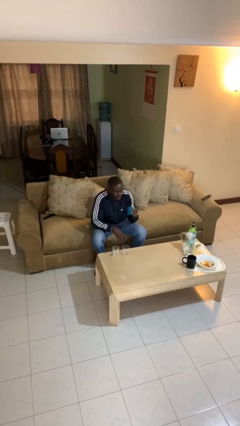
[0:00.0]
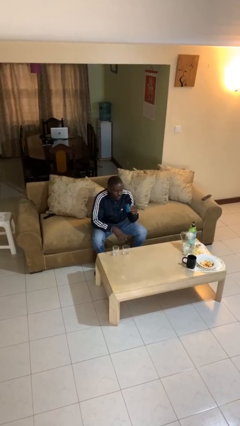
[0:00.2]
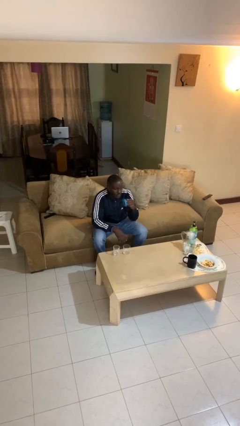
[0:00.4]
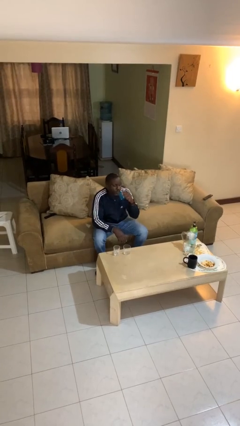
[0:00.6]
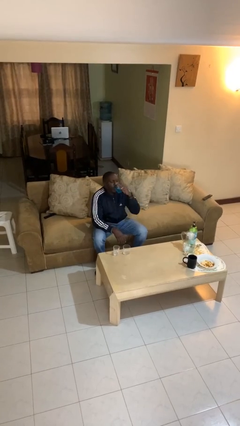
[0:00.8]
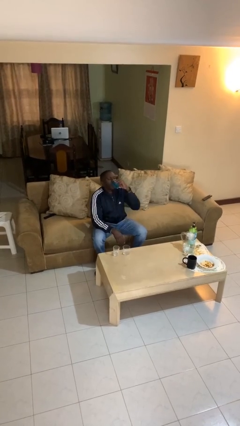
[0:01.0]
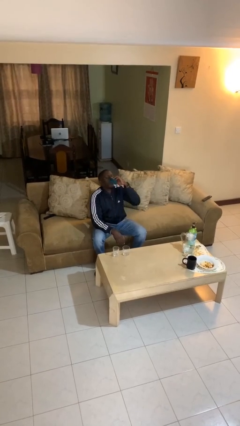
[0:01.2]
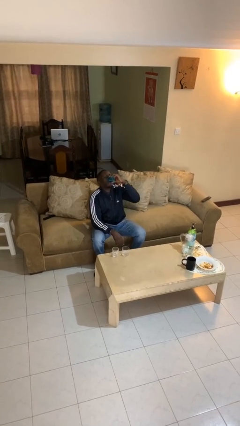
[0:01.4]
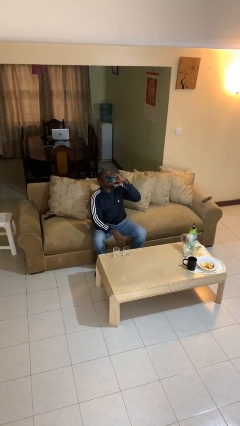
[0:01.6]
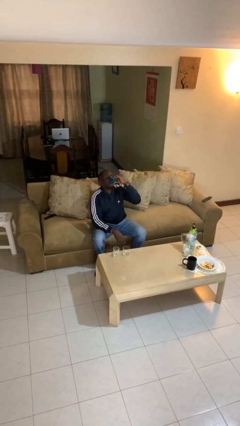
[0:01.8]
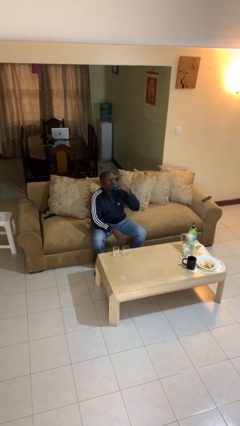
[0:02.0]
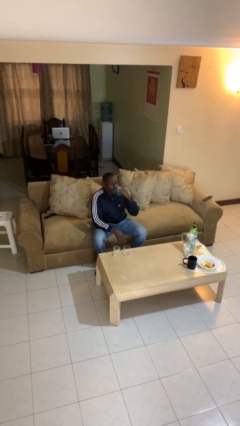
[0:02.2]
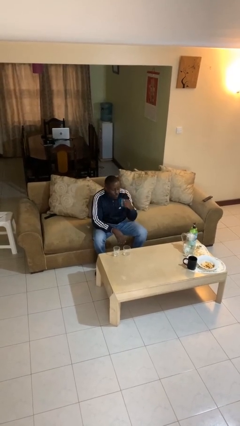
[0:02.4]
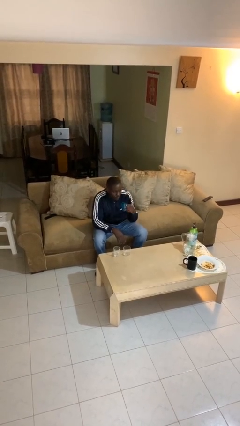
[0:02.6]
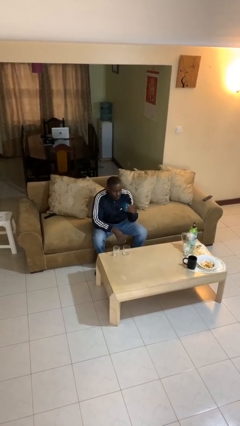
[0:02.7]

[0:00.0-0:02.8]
person drinks from shotglass

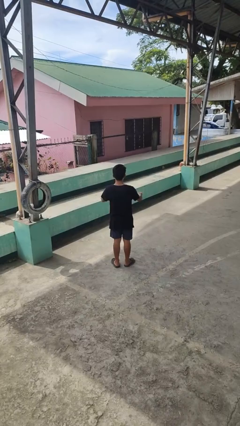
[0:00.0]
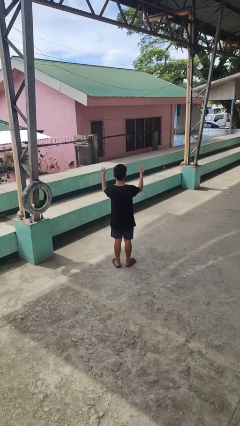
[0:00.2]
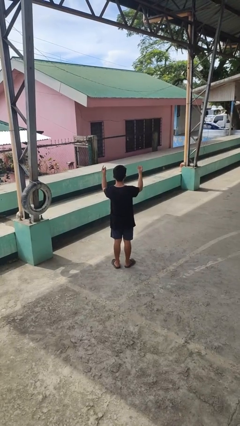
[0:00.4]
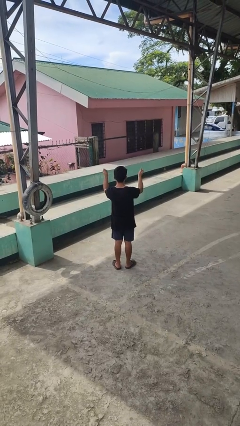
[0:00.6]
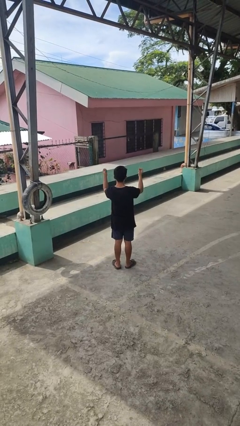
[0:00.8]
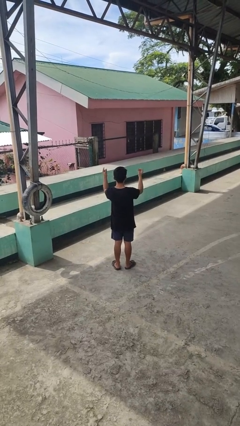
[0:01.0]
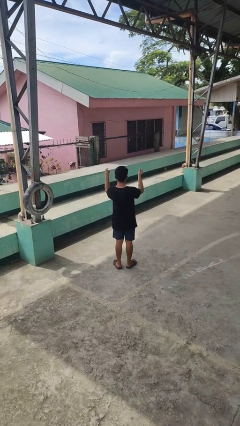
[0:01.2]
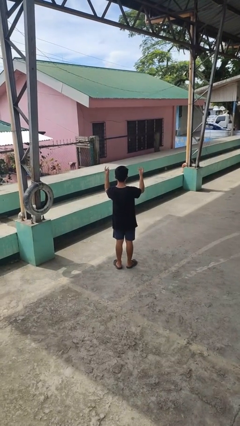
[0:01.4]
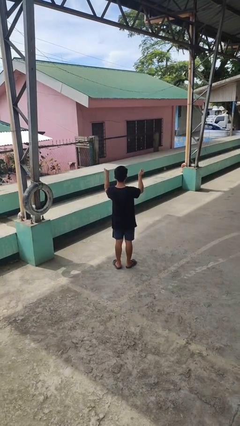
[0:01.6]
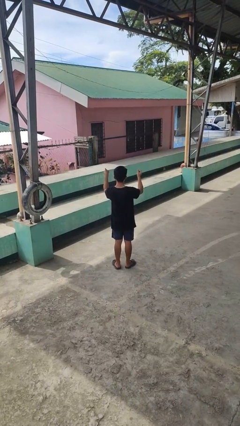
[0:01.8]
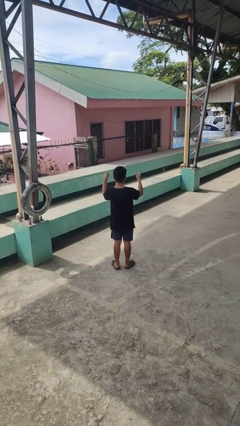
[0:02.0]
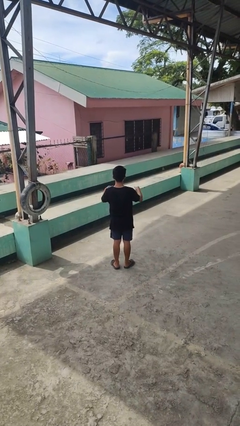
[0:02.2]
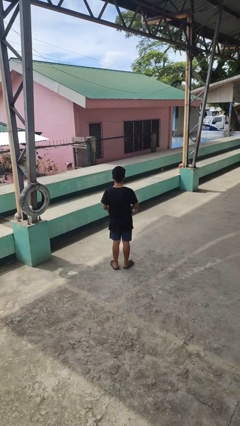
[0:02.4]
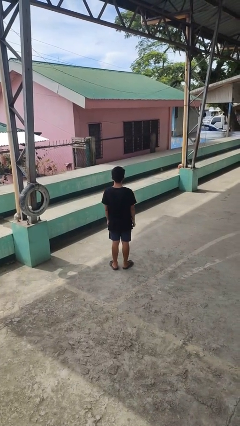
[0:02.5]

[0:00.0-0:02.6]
person snaps fingers

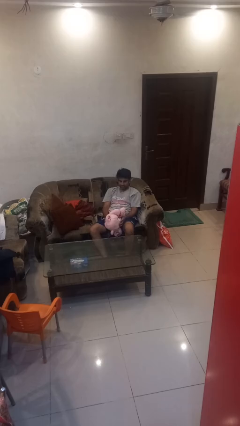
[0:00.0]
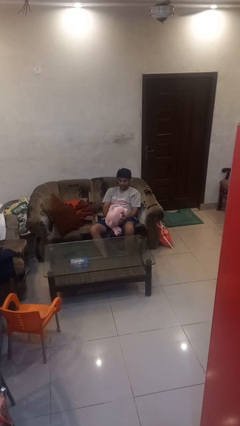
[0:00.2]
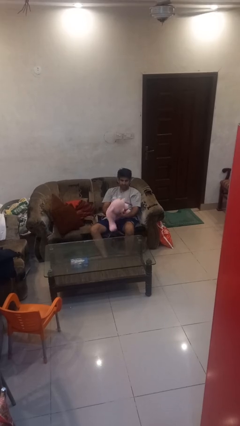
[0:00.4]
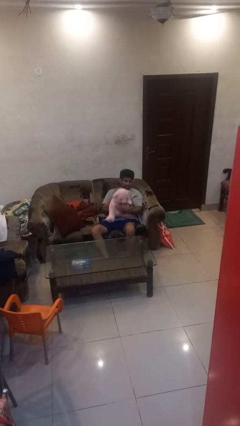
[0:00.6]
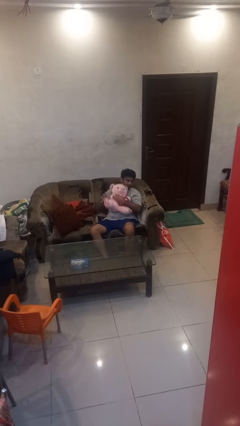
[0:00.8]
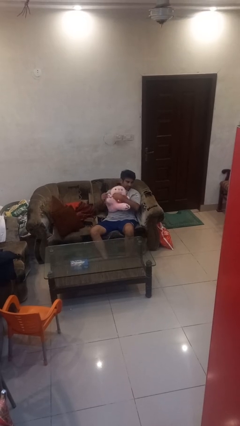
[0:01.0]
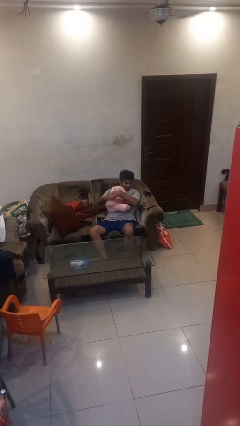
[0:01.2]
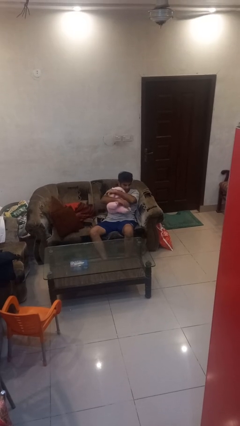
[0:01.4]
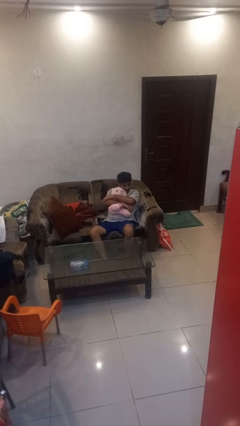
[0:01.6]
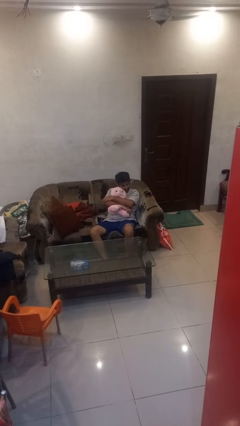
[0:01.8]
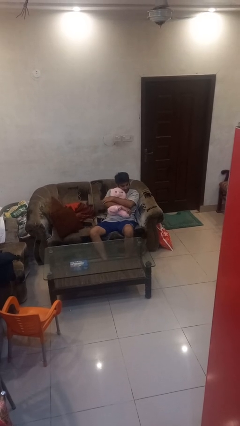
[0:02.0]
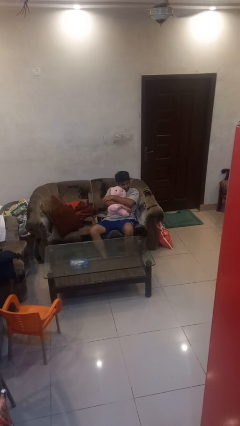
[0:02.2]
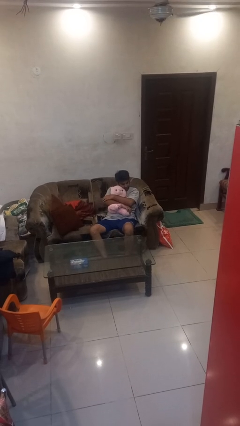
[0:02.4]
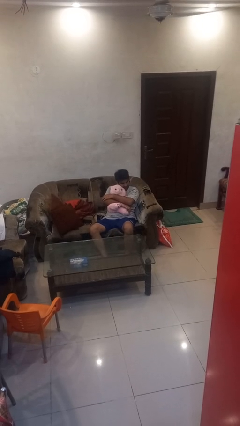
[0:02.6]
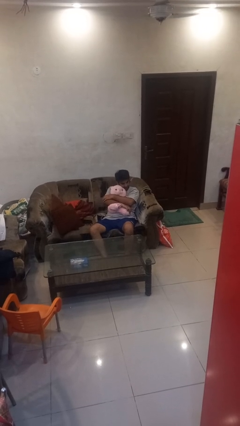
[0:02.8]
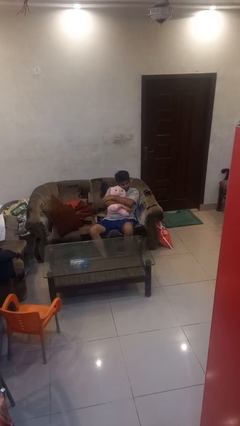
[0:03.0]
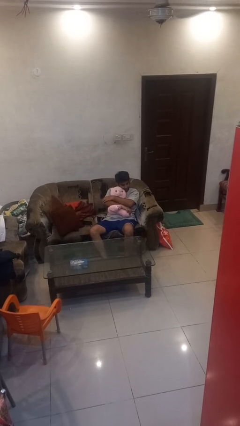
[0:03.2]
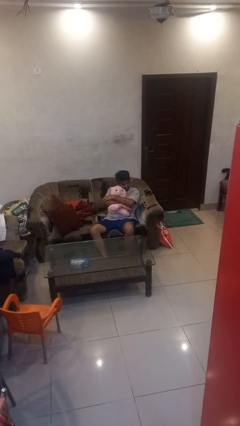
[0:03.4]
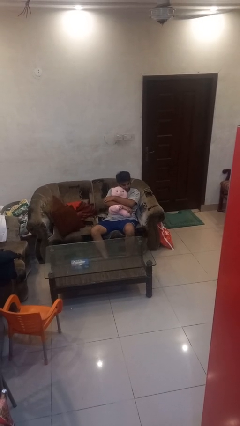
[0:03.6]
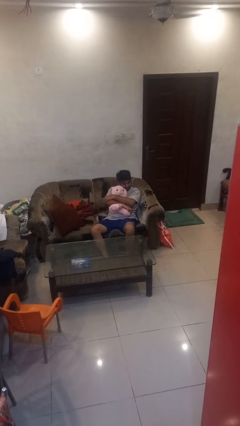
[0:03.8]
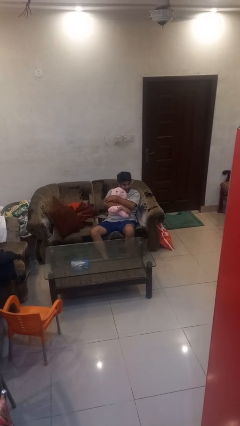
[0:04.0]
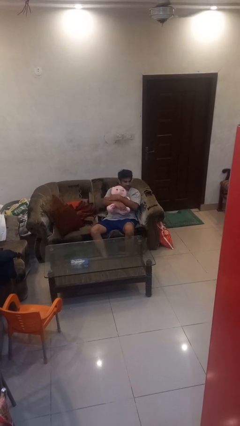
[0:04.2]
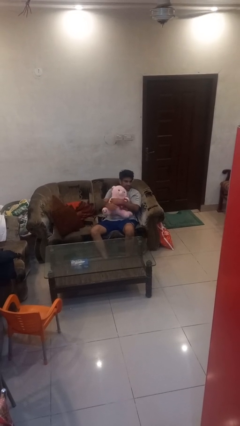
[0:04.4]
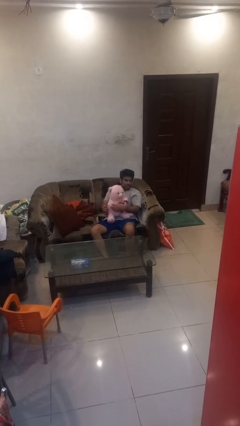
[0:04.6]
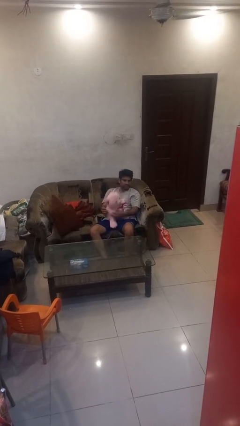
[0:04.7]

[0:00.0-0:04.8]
person hugs stuffed animal

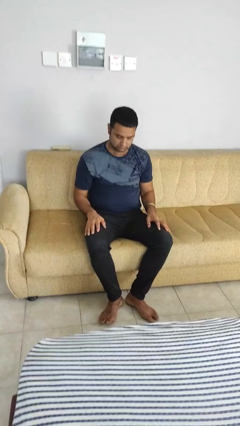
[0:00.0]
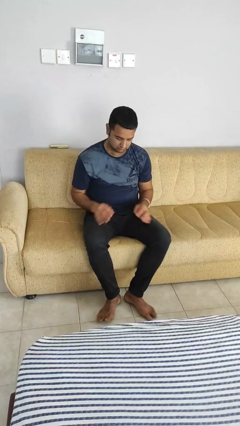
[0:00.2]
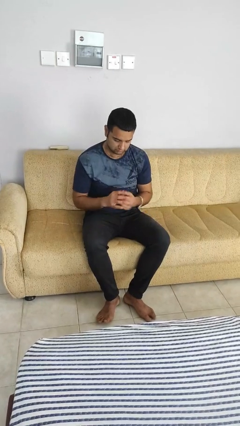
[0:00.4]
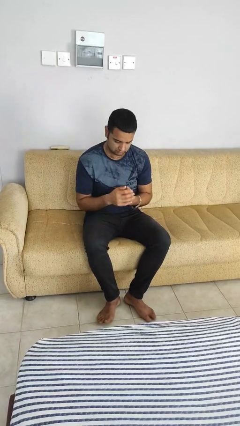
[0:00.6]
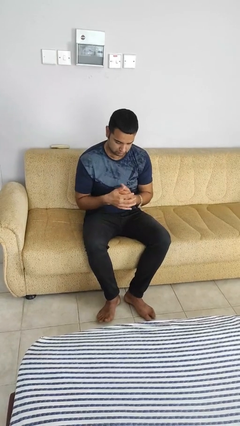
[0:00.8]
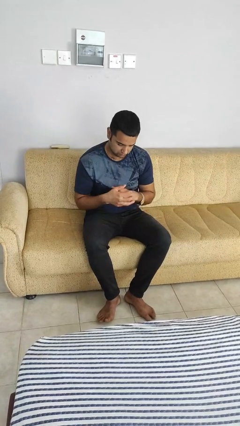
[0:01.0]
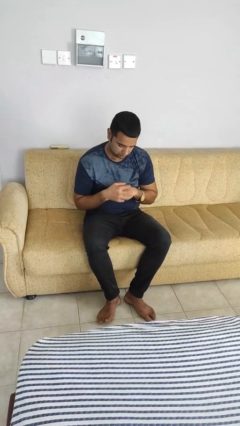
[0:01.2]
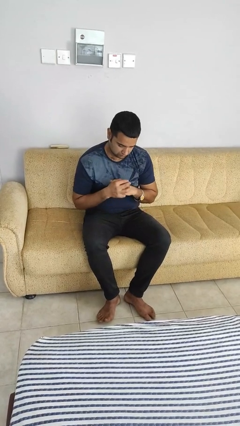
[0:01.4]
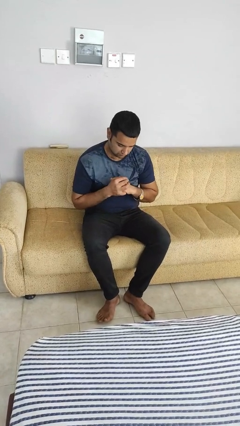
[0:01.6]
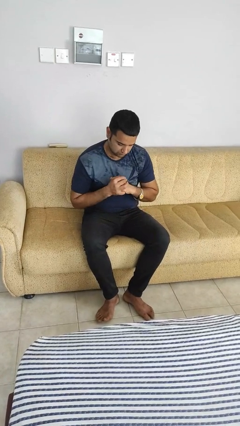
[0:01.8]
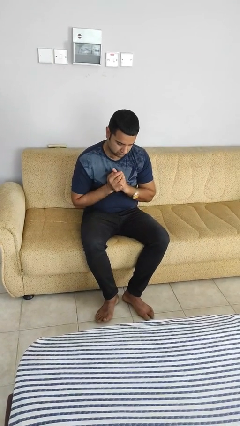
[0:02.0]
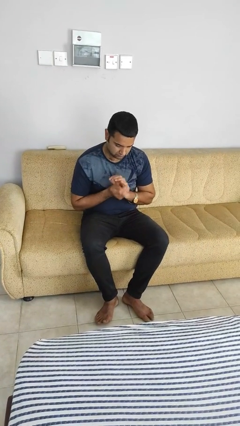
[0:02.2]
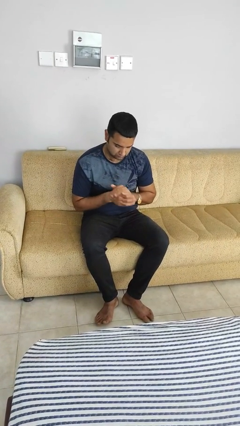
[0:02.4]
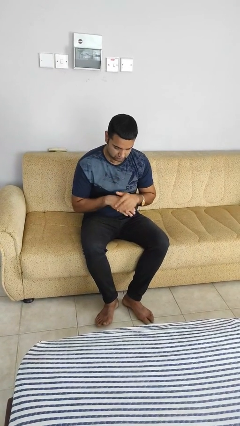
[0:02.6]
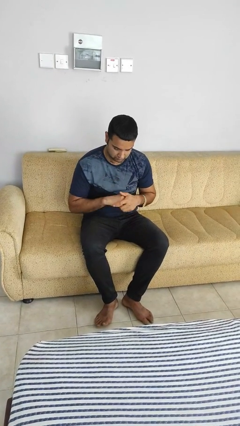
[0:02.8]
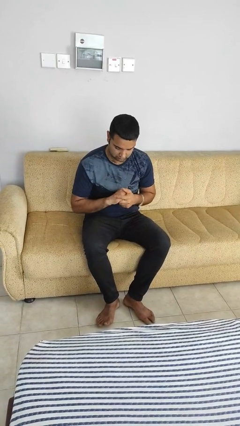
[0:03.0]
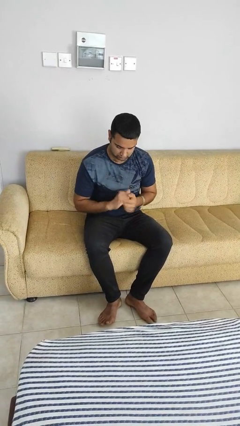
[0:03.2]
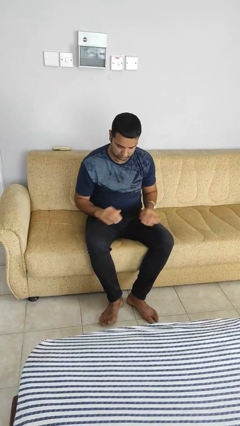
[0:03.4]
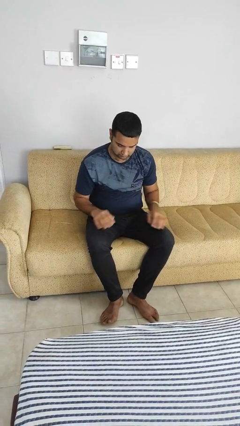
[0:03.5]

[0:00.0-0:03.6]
person looks at hands in lap

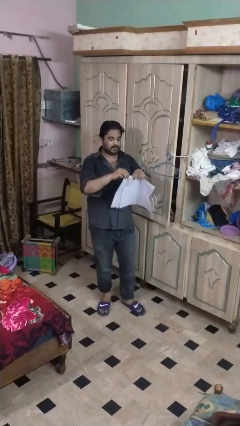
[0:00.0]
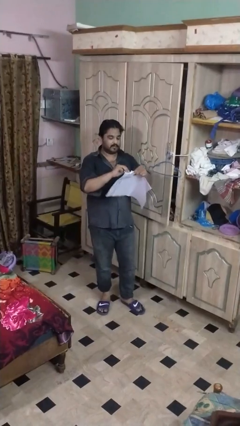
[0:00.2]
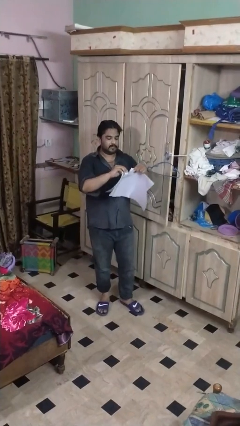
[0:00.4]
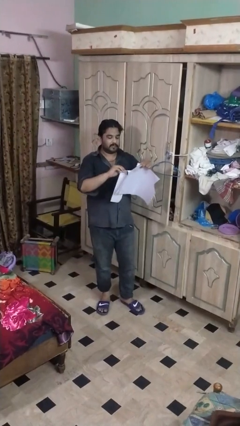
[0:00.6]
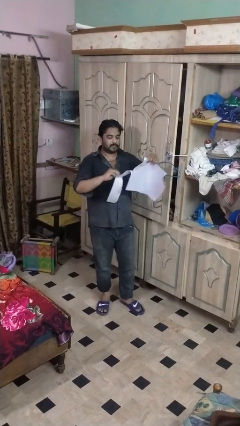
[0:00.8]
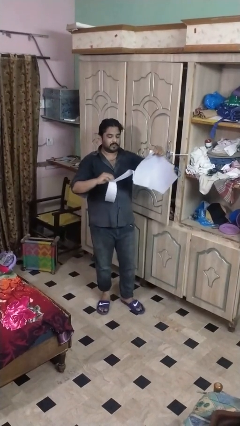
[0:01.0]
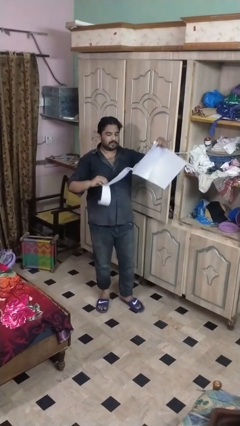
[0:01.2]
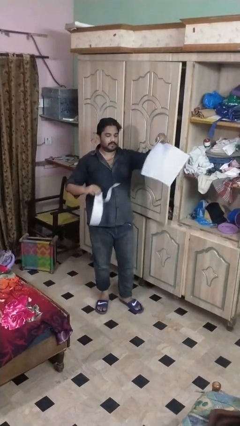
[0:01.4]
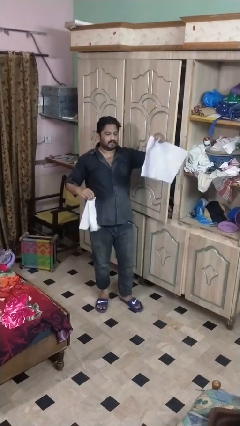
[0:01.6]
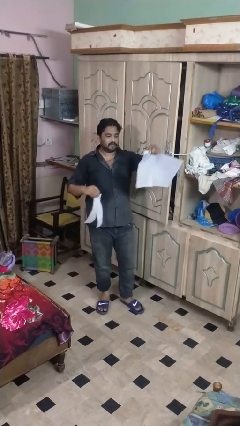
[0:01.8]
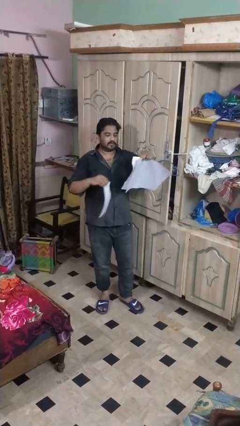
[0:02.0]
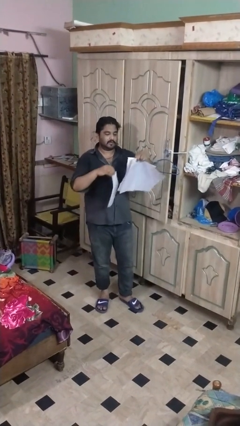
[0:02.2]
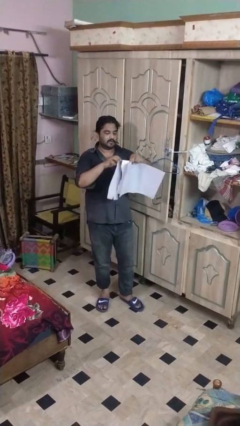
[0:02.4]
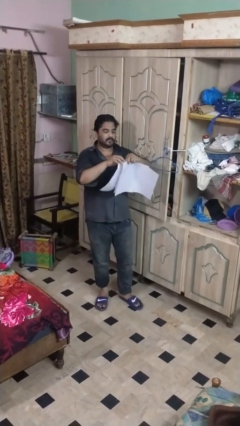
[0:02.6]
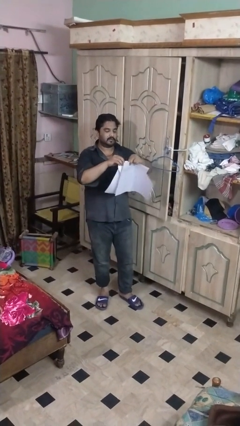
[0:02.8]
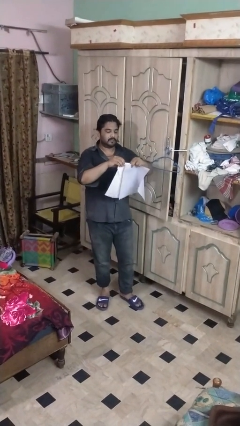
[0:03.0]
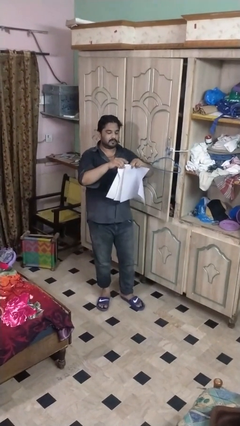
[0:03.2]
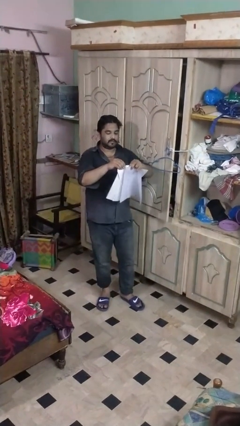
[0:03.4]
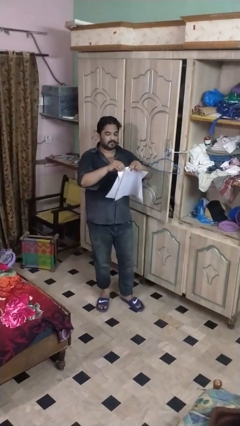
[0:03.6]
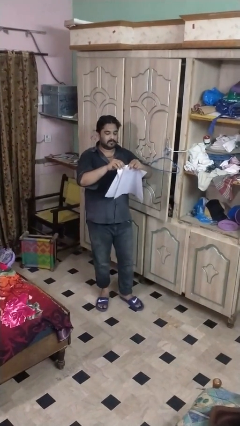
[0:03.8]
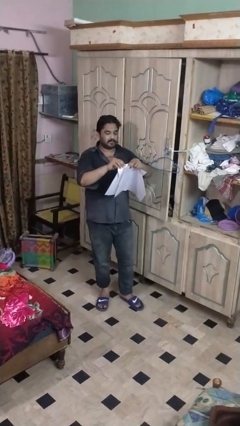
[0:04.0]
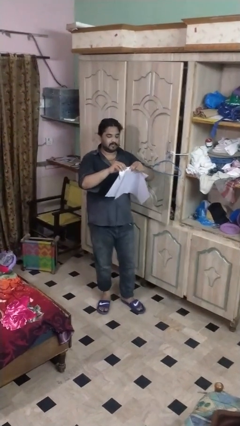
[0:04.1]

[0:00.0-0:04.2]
person tears paper
